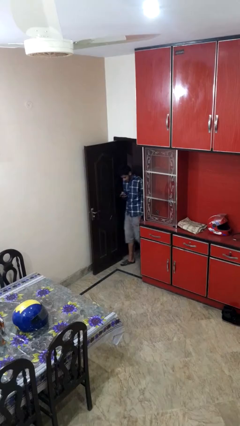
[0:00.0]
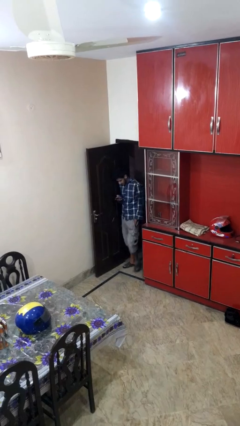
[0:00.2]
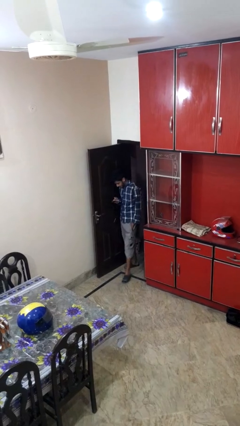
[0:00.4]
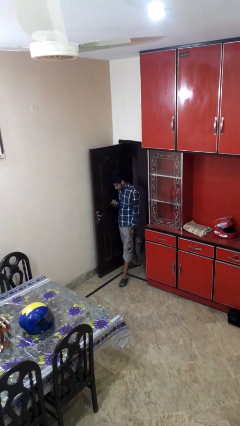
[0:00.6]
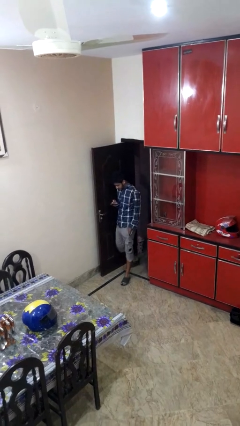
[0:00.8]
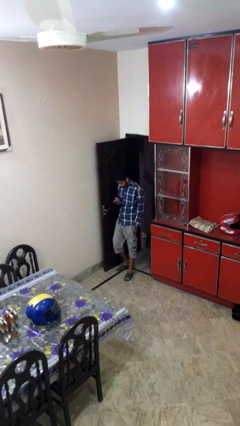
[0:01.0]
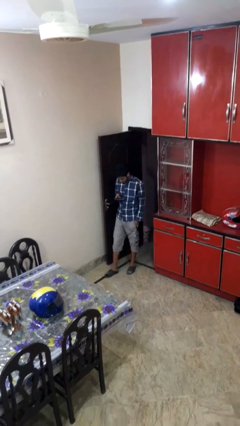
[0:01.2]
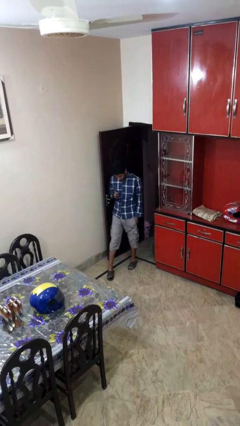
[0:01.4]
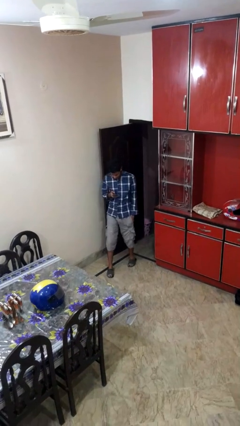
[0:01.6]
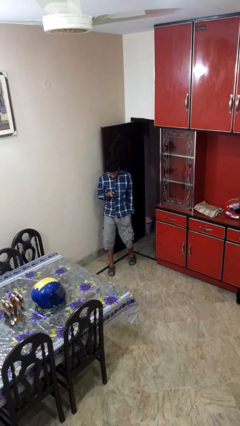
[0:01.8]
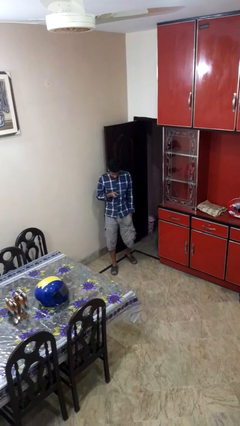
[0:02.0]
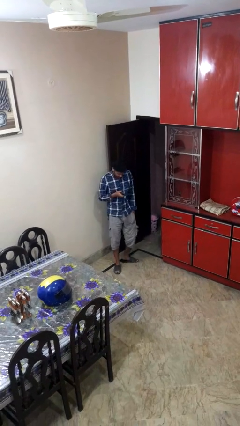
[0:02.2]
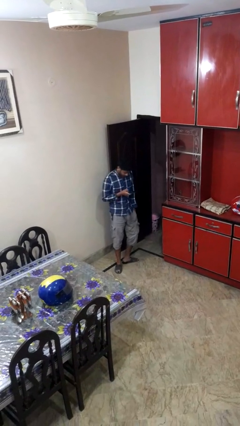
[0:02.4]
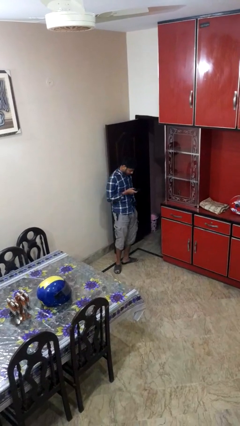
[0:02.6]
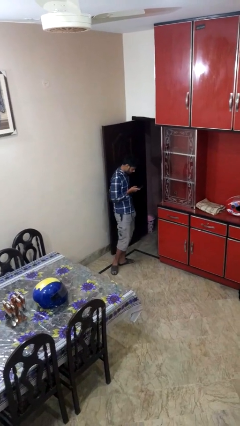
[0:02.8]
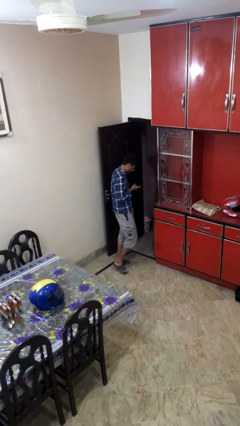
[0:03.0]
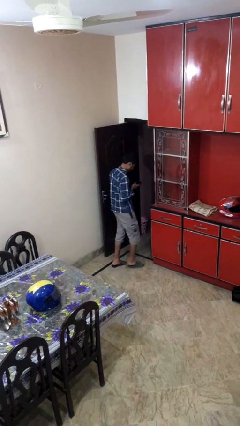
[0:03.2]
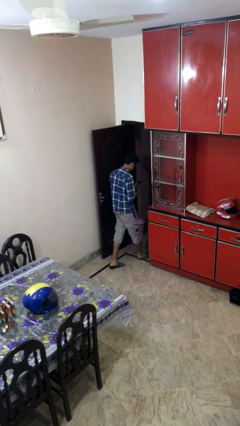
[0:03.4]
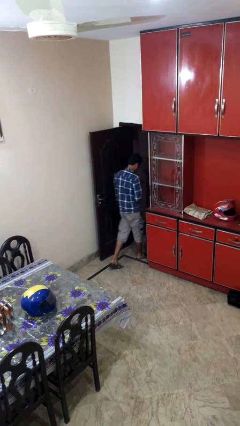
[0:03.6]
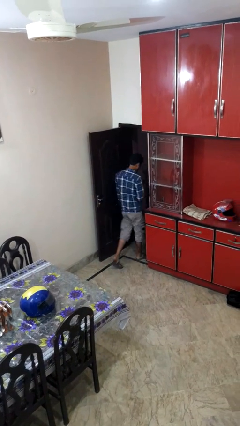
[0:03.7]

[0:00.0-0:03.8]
person enters scene through structure

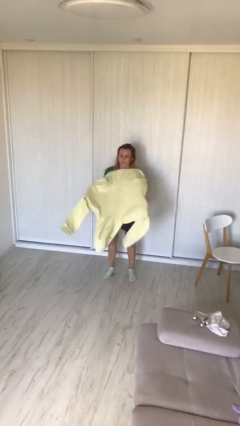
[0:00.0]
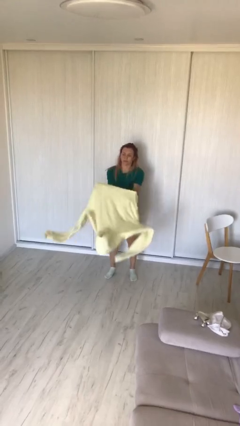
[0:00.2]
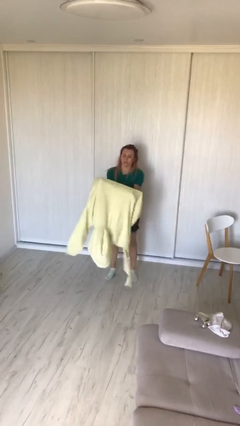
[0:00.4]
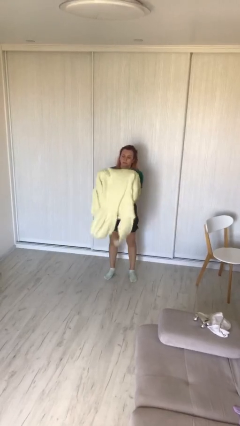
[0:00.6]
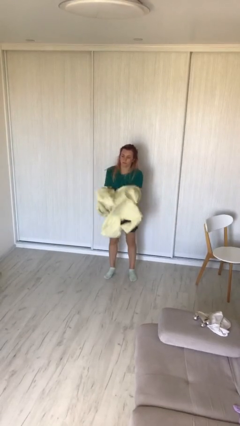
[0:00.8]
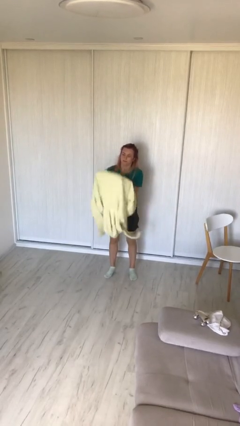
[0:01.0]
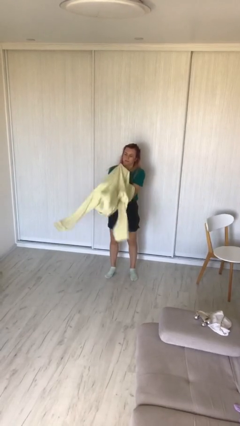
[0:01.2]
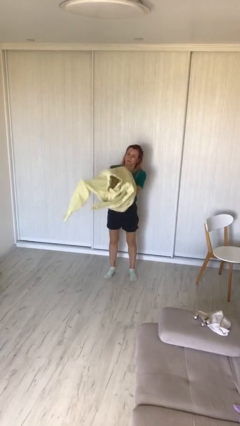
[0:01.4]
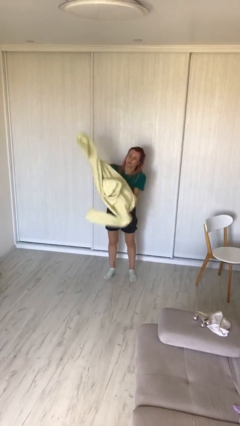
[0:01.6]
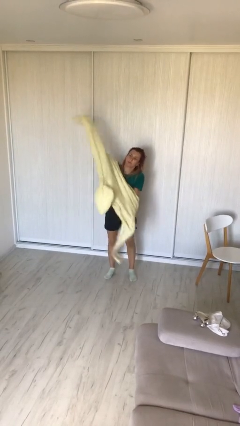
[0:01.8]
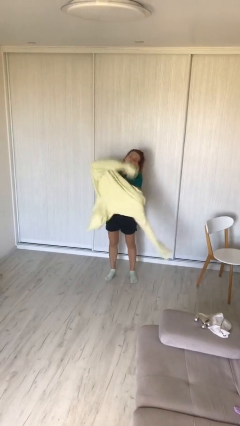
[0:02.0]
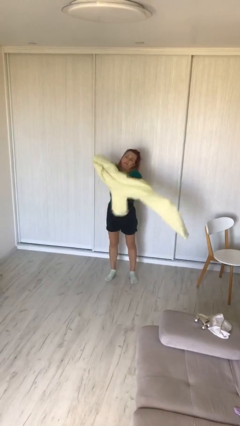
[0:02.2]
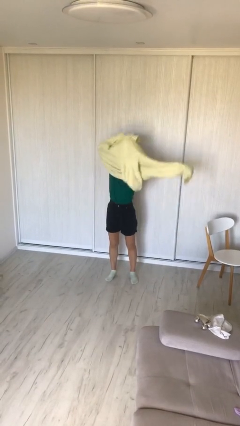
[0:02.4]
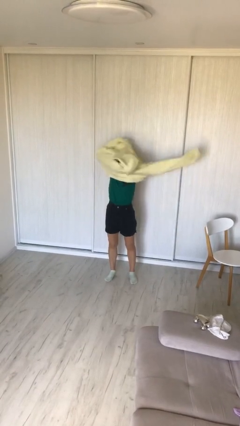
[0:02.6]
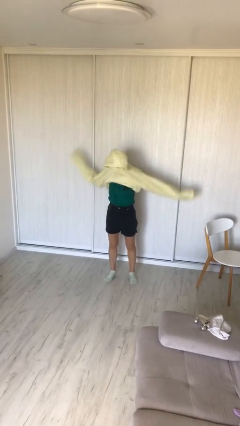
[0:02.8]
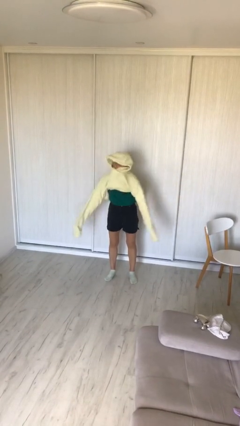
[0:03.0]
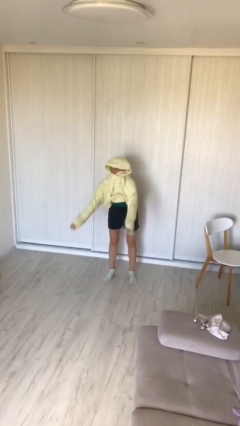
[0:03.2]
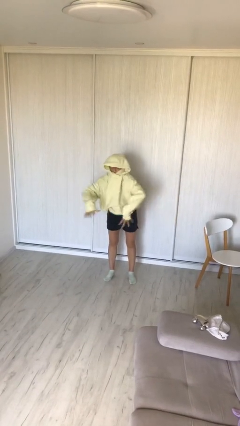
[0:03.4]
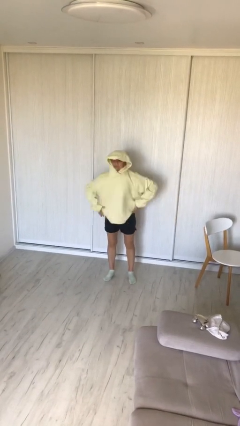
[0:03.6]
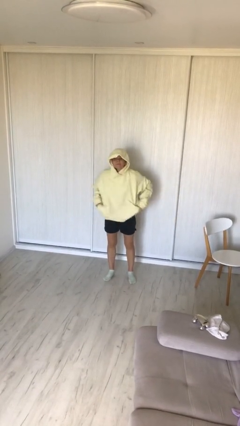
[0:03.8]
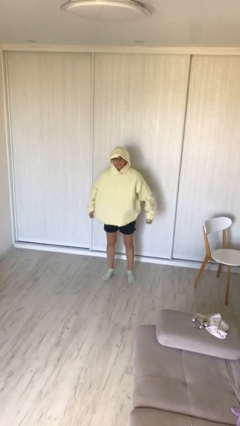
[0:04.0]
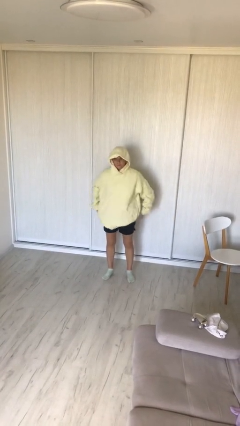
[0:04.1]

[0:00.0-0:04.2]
person puts on hoodie

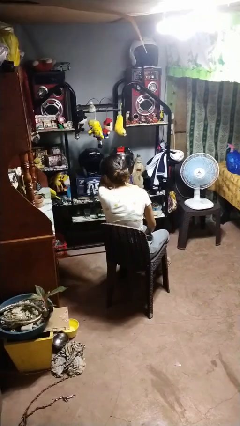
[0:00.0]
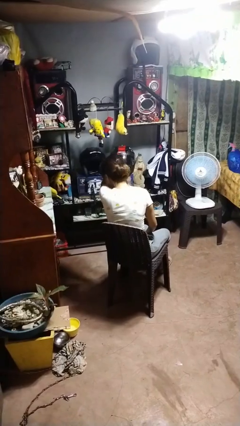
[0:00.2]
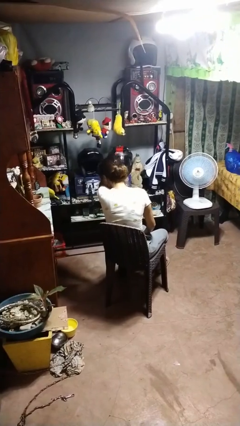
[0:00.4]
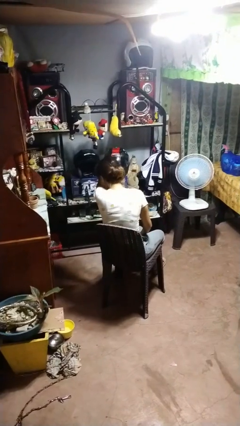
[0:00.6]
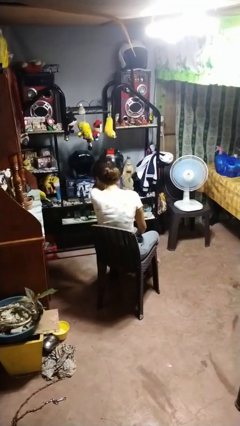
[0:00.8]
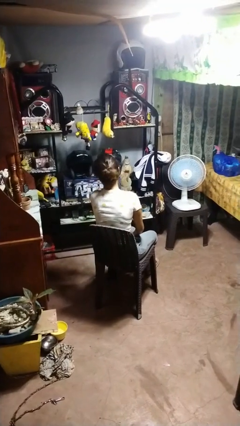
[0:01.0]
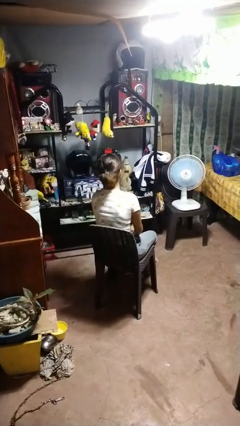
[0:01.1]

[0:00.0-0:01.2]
person sneezes into arm

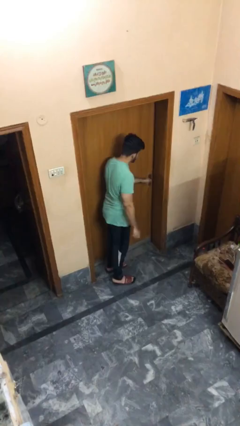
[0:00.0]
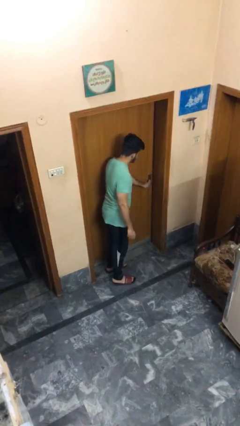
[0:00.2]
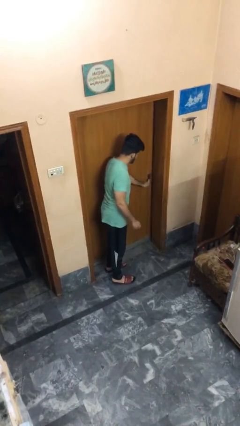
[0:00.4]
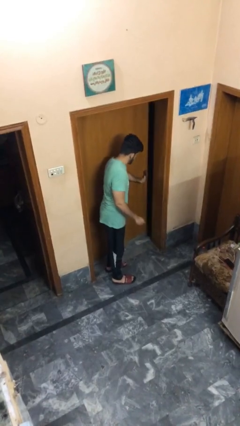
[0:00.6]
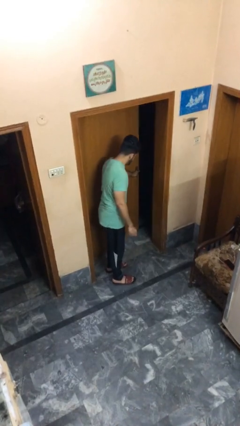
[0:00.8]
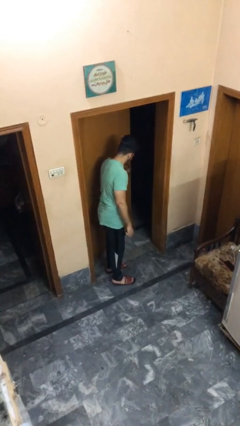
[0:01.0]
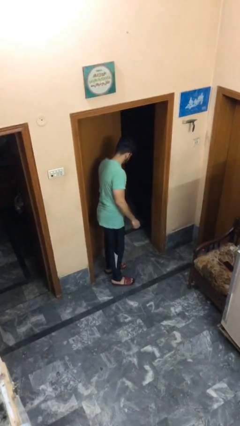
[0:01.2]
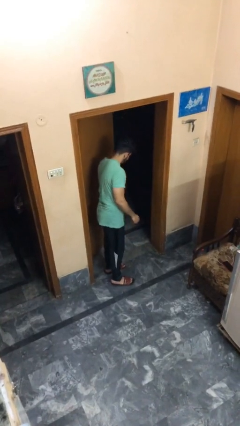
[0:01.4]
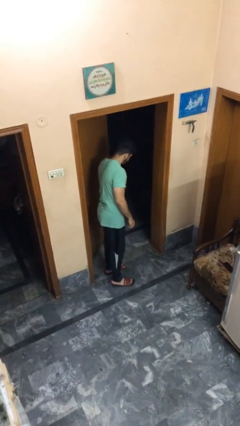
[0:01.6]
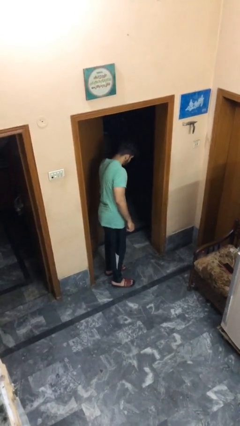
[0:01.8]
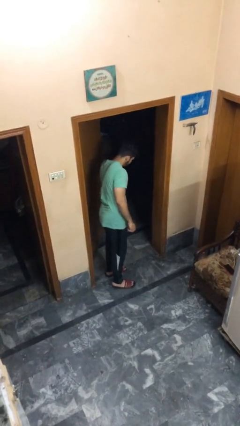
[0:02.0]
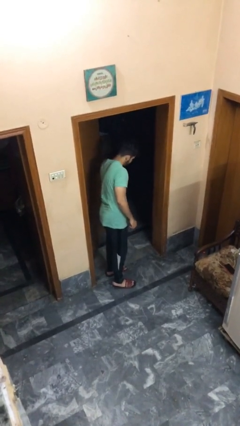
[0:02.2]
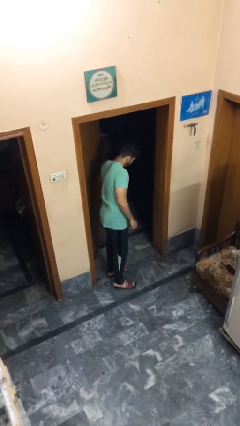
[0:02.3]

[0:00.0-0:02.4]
person opens facility door

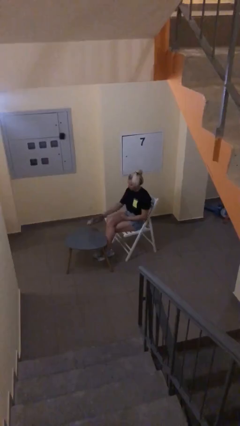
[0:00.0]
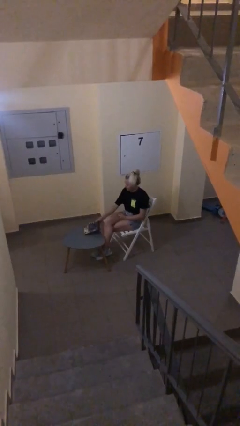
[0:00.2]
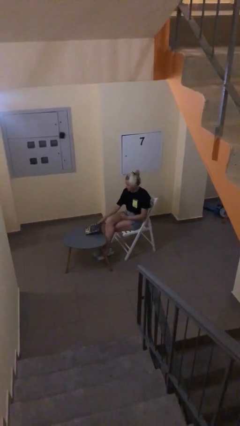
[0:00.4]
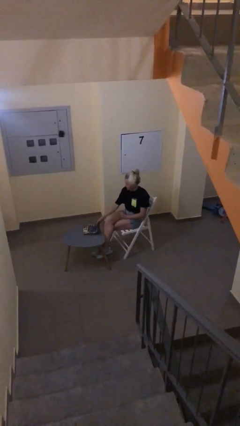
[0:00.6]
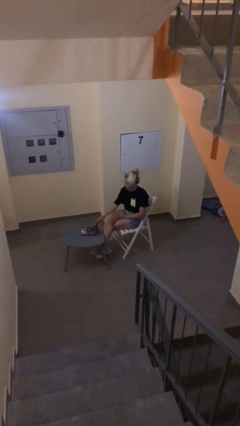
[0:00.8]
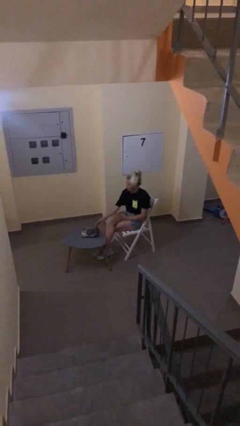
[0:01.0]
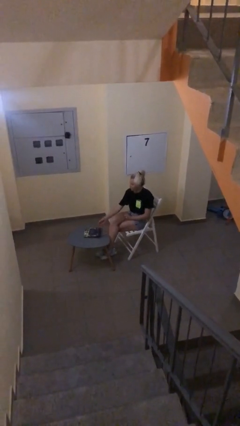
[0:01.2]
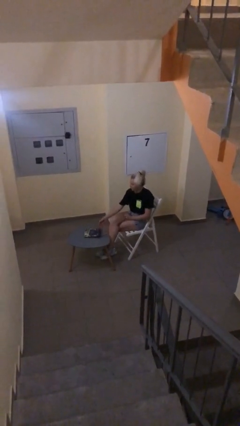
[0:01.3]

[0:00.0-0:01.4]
person puts down object on table

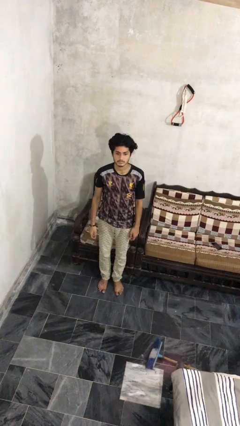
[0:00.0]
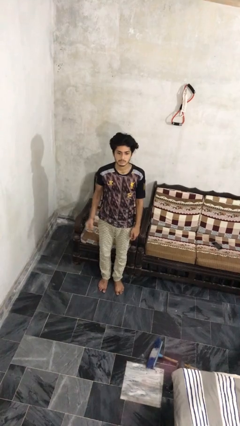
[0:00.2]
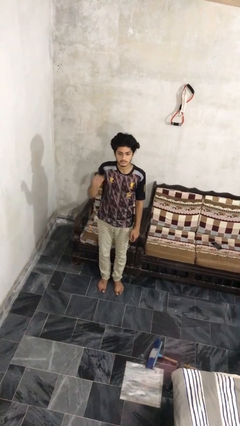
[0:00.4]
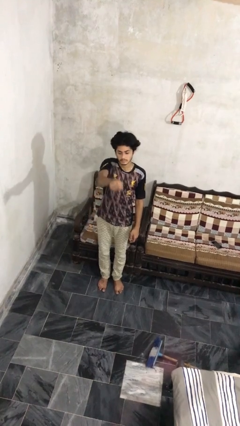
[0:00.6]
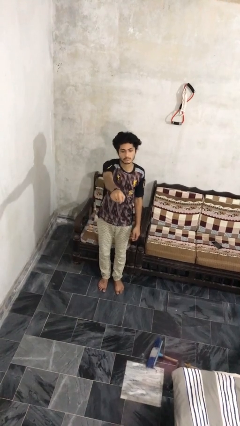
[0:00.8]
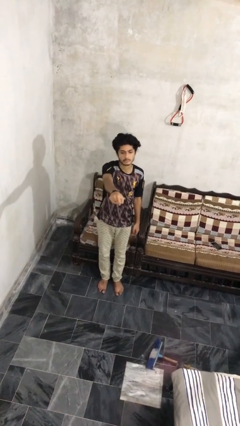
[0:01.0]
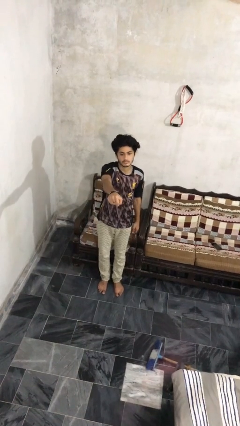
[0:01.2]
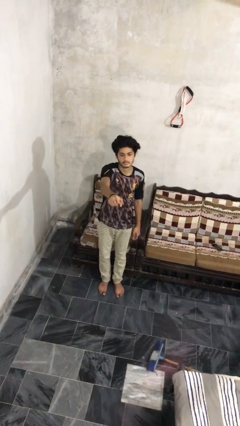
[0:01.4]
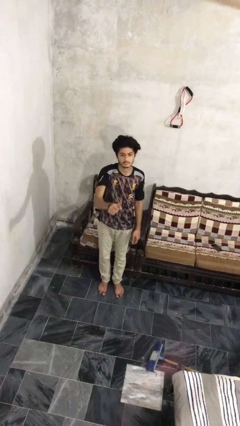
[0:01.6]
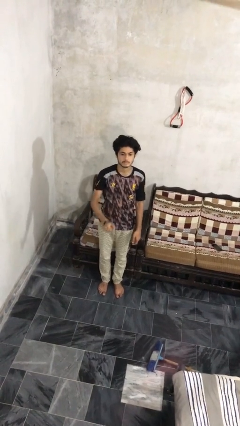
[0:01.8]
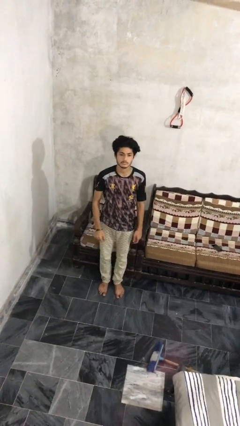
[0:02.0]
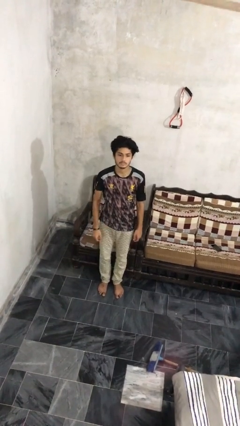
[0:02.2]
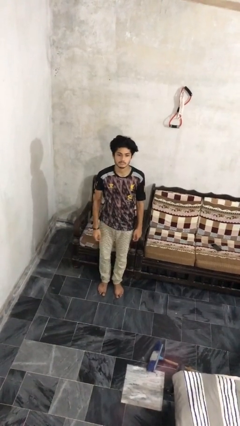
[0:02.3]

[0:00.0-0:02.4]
person punches

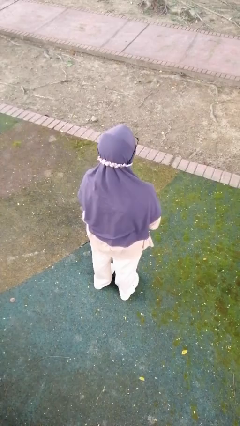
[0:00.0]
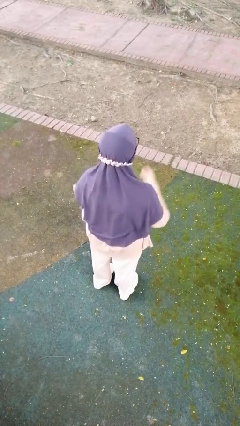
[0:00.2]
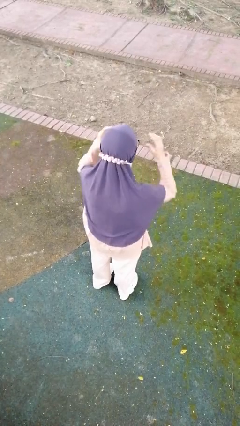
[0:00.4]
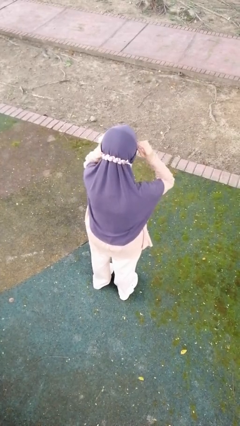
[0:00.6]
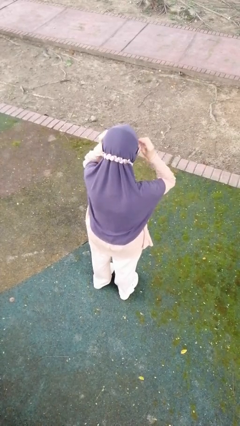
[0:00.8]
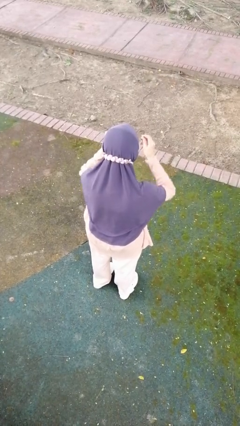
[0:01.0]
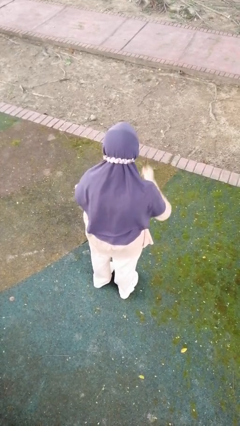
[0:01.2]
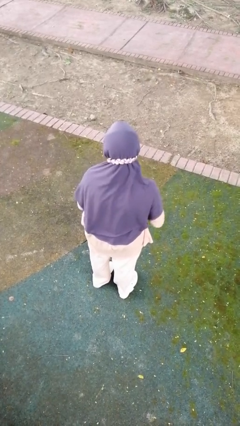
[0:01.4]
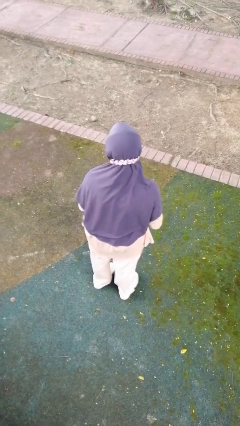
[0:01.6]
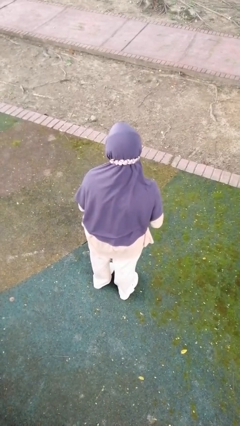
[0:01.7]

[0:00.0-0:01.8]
person takes off glasses
